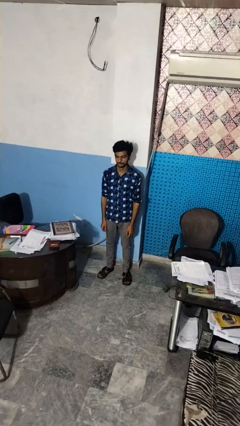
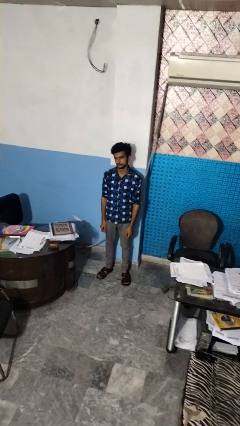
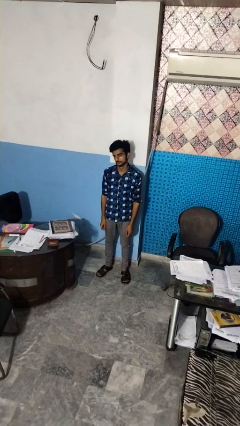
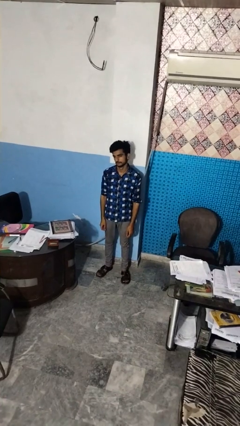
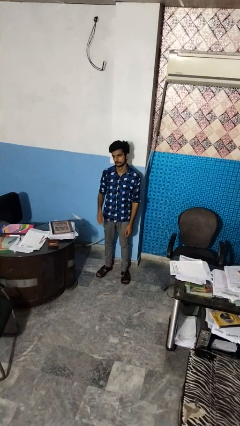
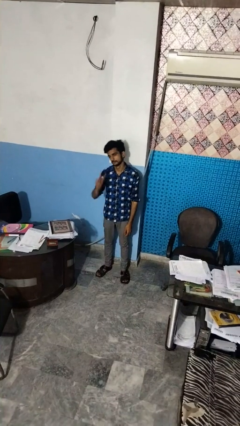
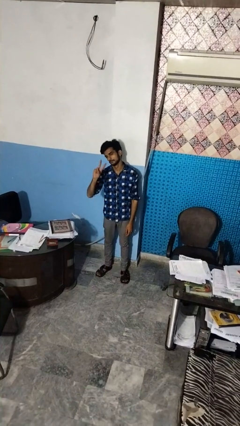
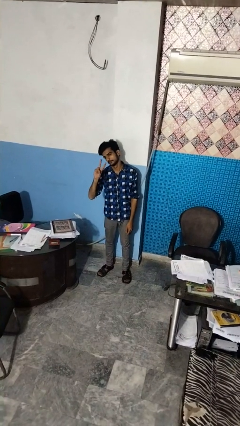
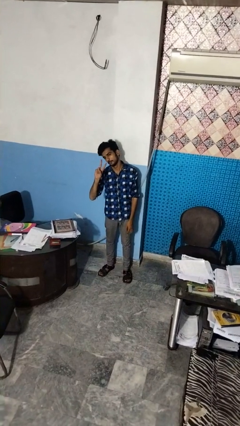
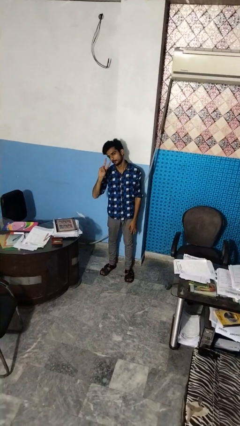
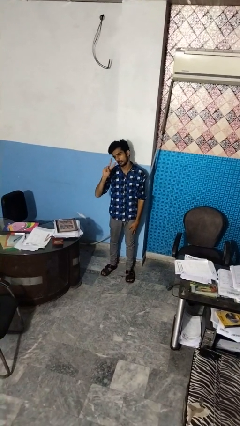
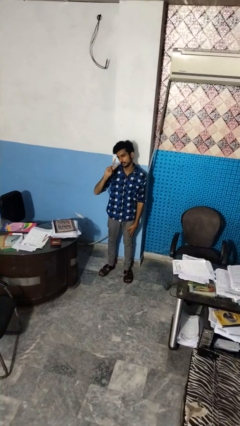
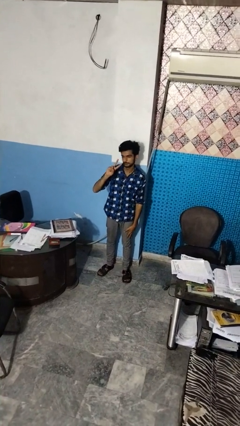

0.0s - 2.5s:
person gestures peace

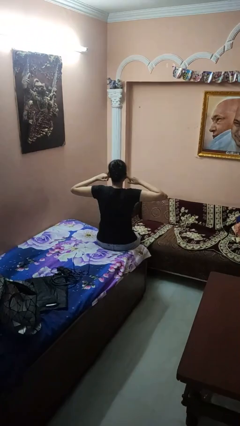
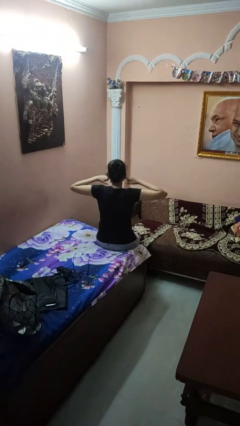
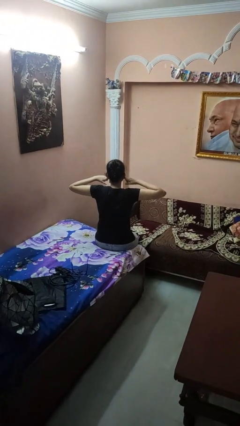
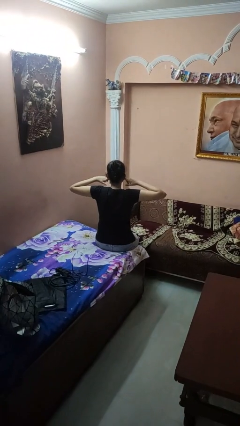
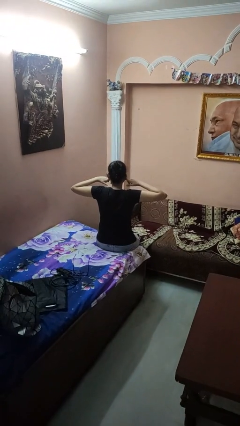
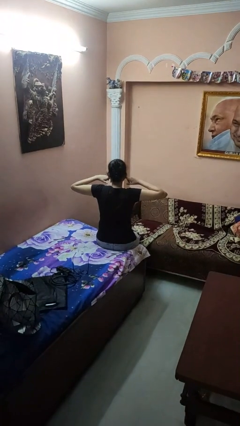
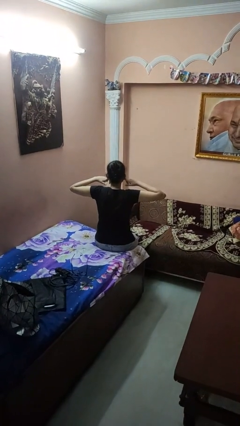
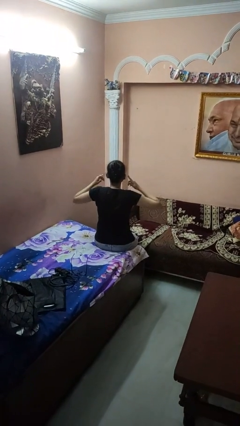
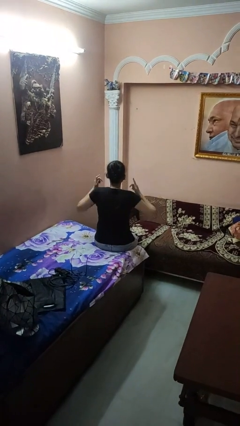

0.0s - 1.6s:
person puts fingers in ear

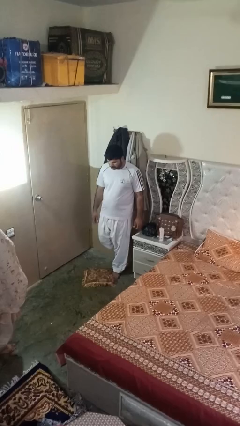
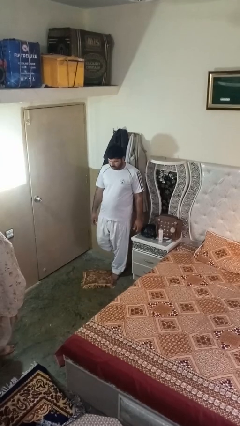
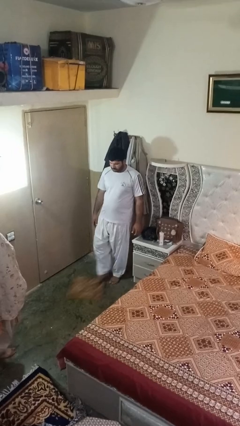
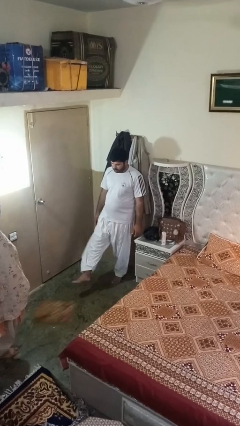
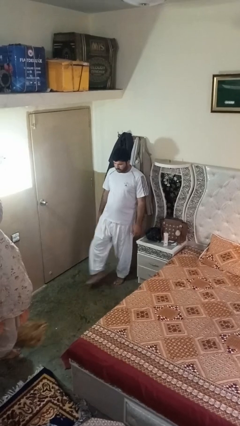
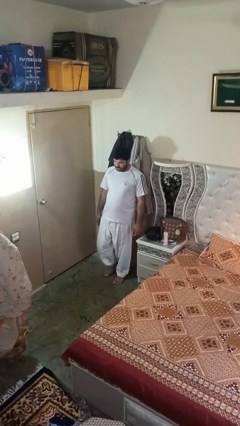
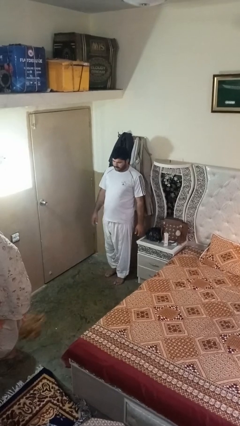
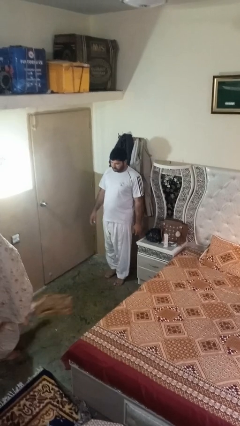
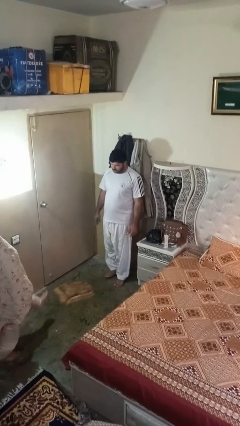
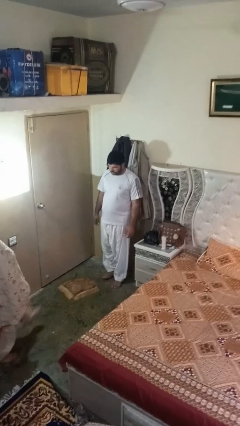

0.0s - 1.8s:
person kicks object to person

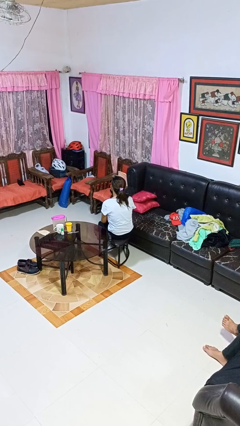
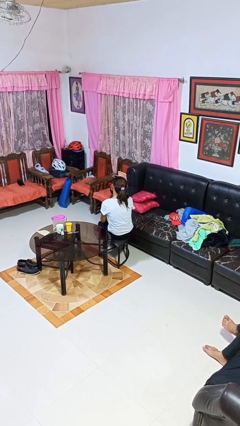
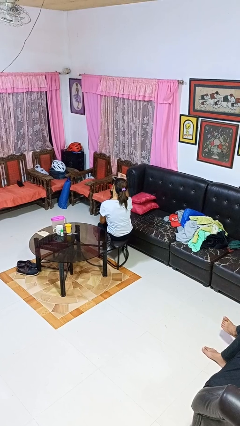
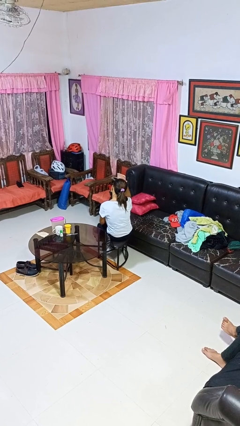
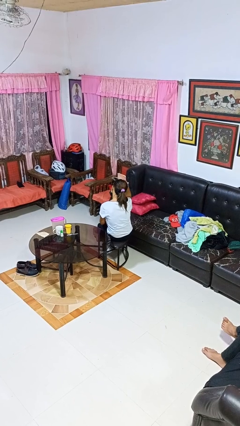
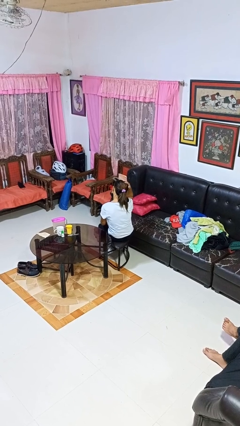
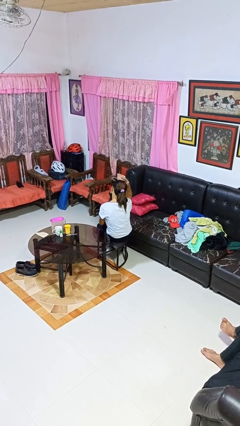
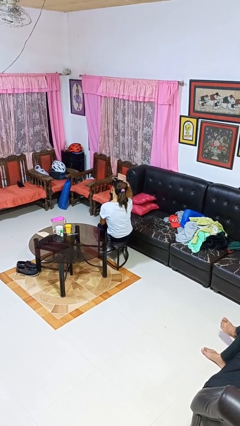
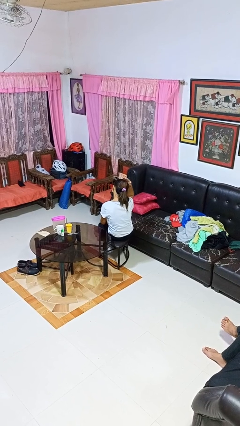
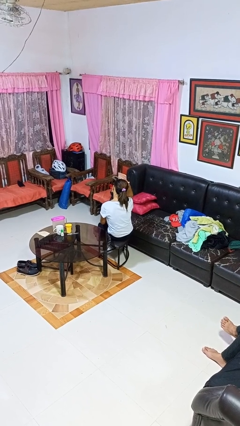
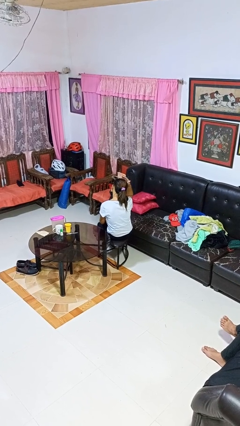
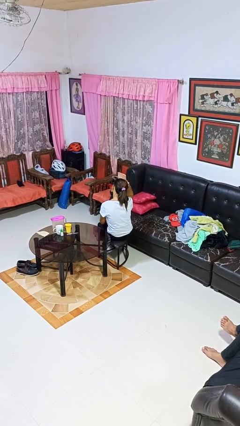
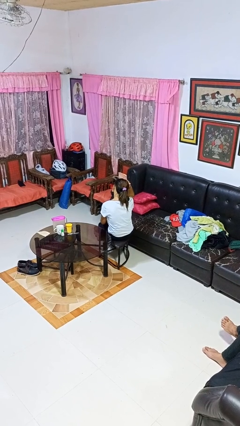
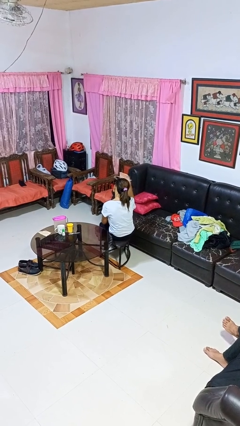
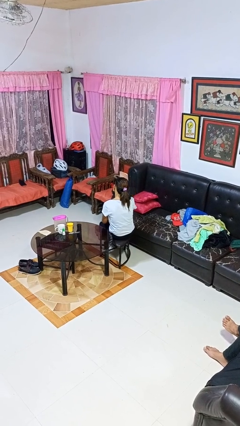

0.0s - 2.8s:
person pats head

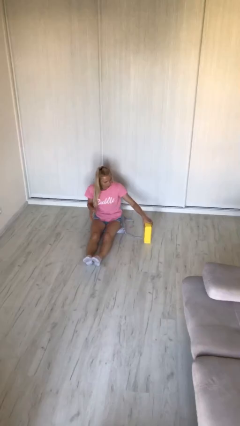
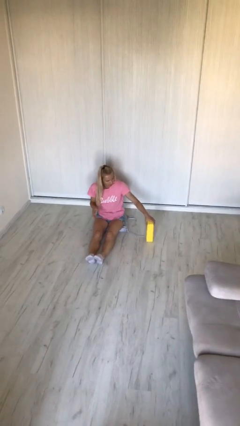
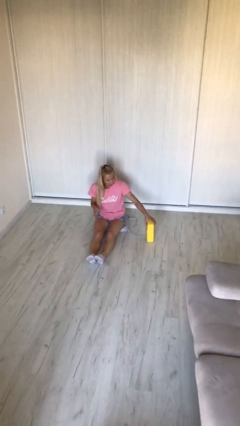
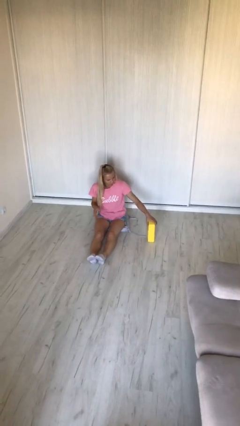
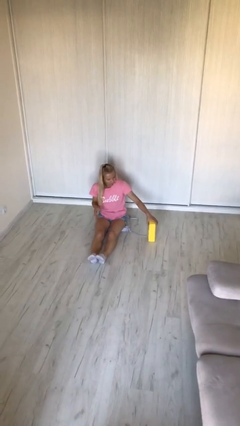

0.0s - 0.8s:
person puts down object on floor

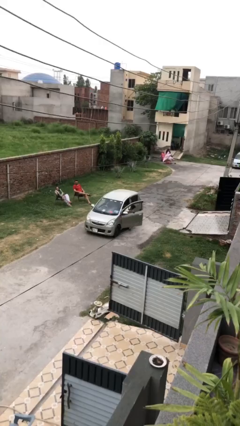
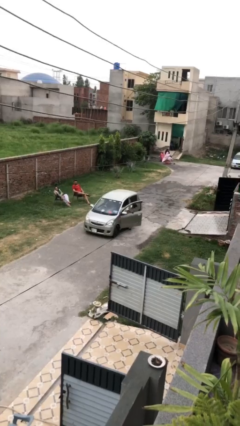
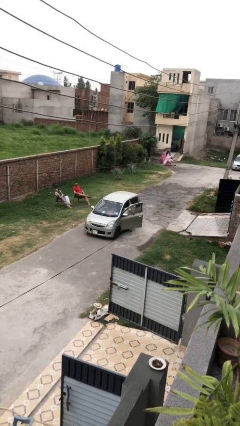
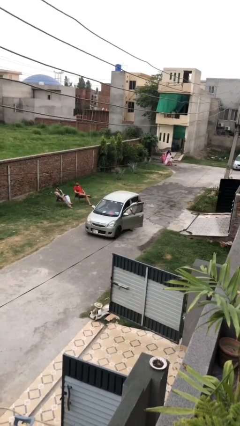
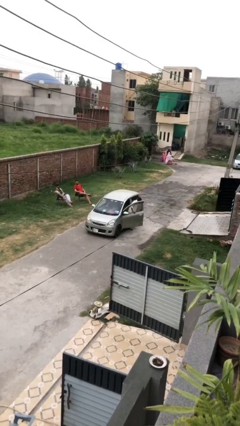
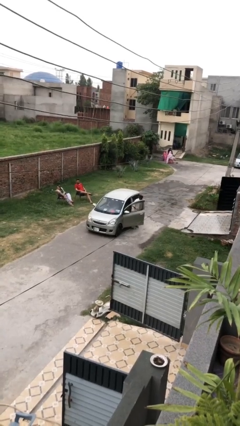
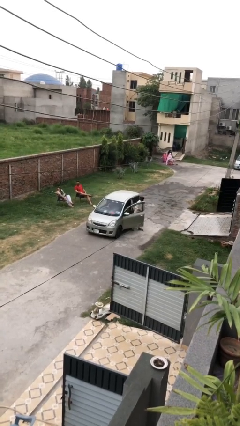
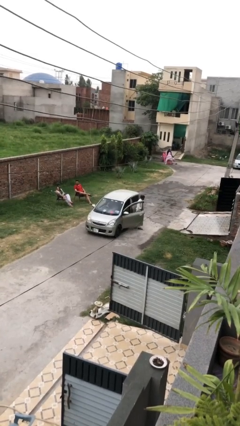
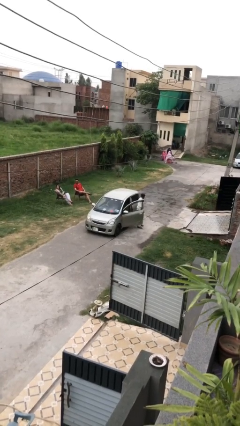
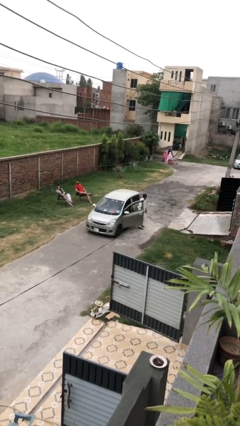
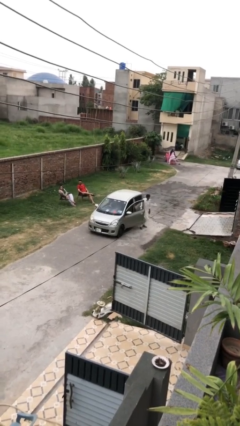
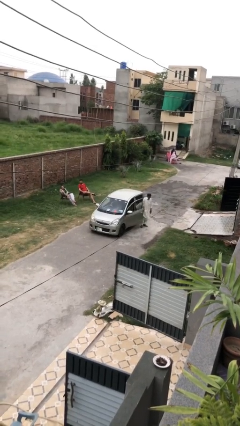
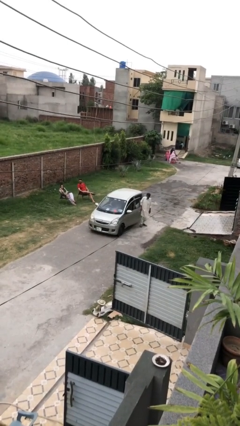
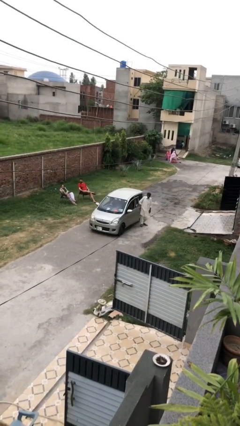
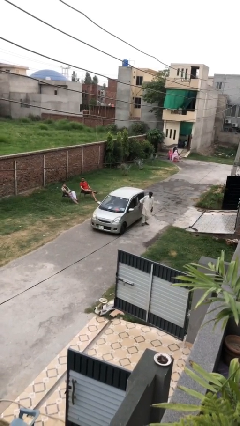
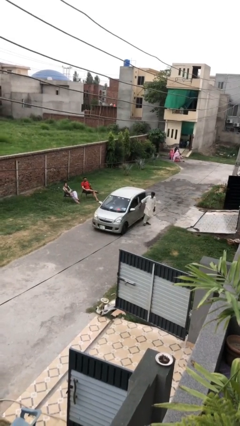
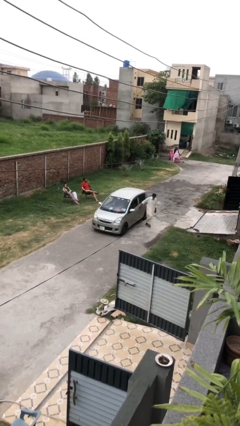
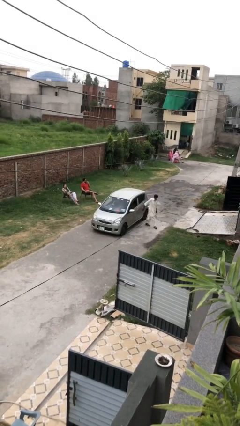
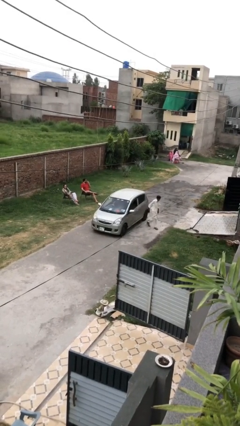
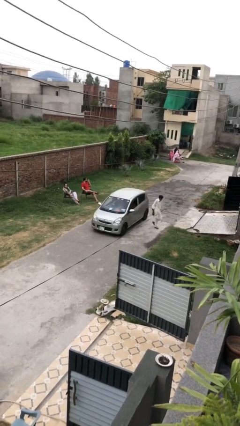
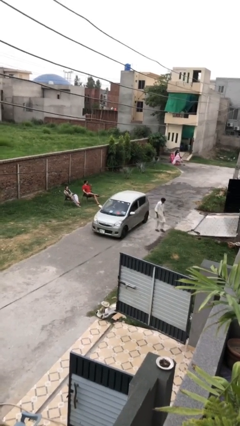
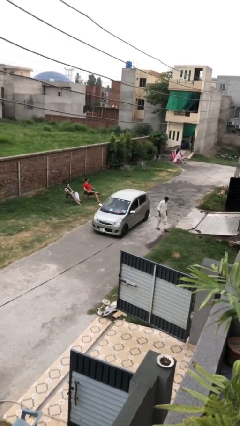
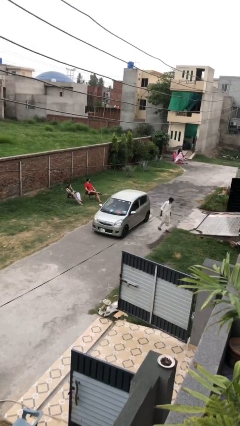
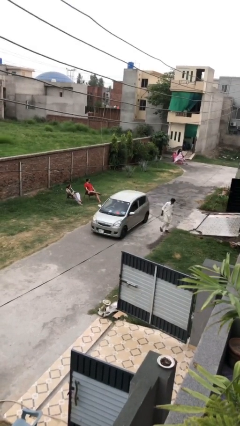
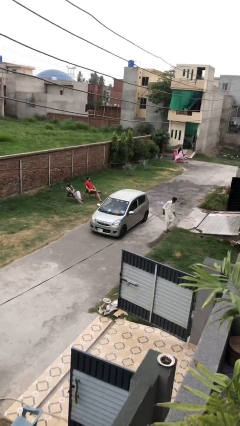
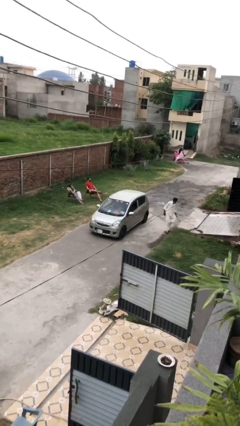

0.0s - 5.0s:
car drops off person

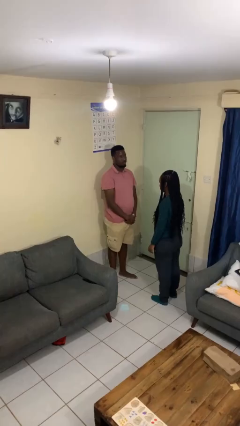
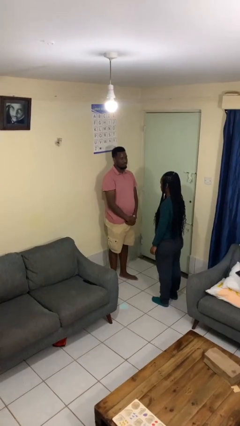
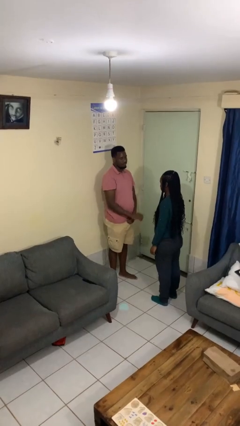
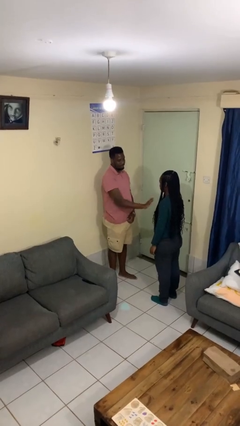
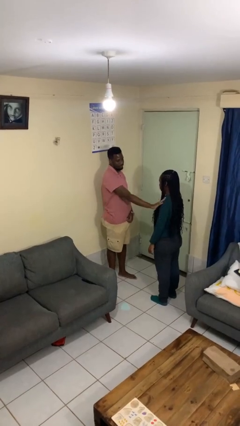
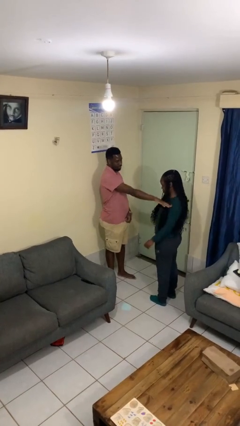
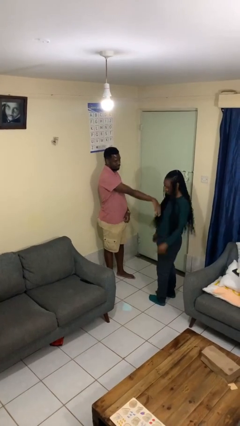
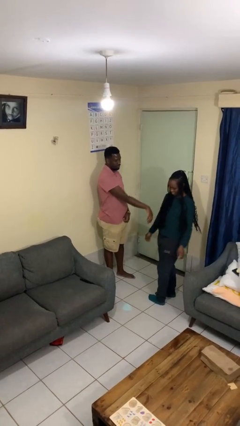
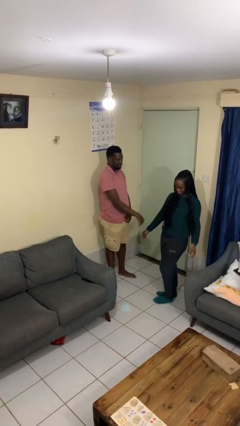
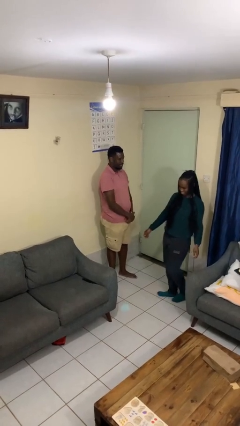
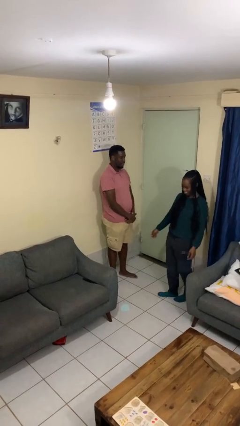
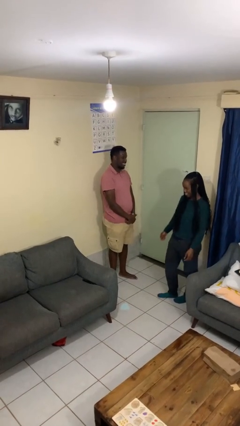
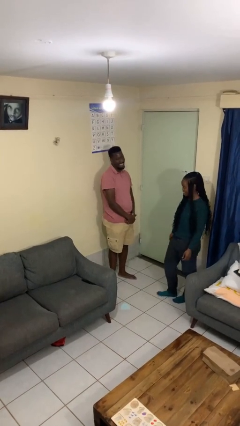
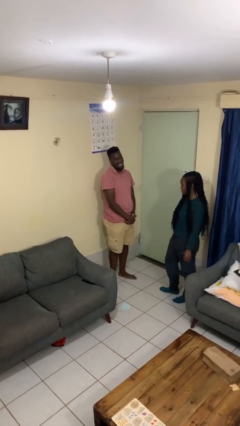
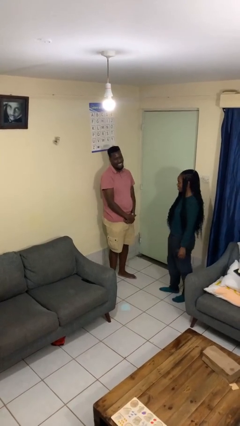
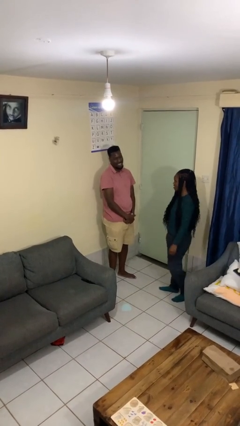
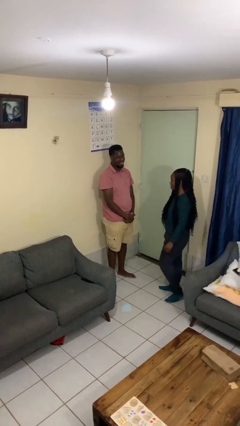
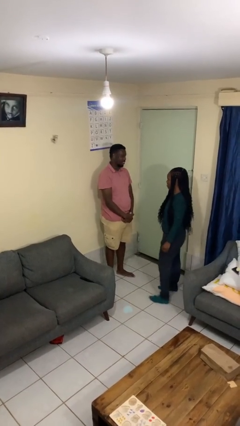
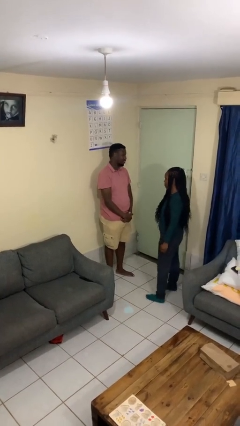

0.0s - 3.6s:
person shoves person
